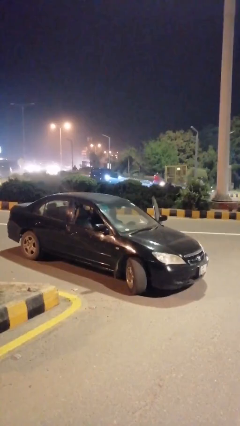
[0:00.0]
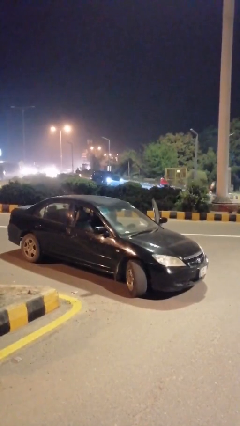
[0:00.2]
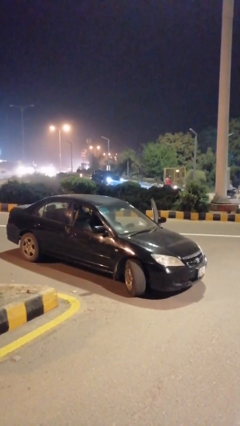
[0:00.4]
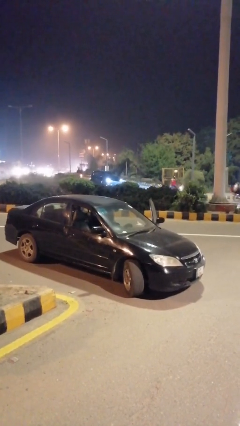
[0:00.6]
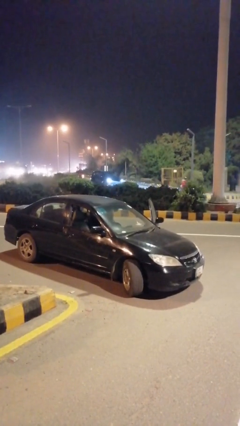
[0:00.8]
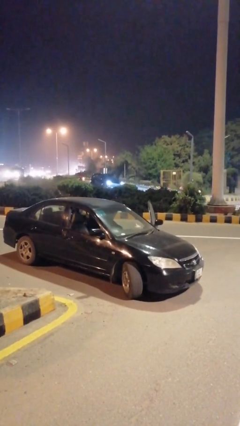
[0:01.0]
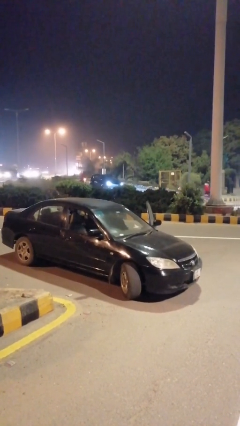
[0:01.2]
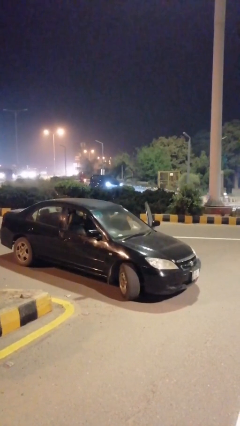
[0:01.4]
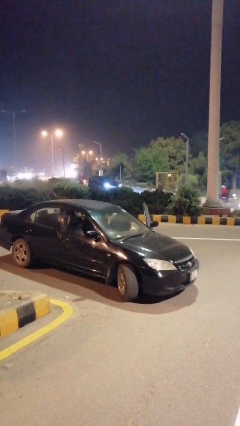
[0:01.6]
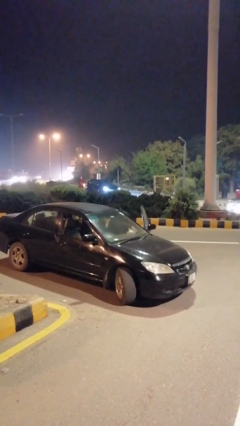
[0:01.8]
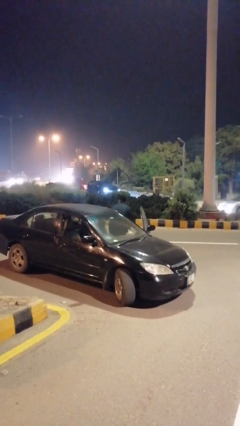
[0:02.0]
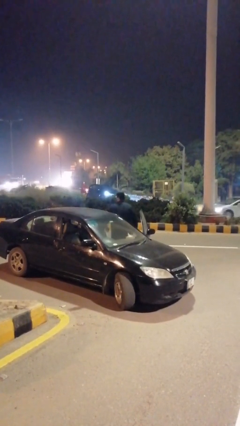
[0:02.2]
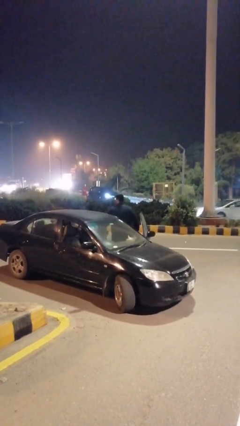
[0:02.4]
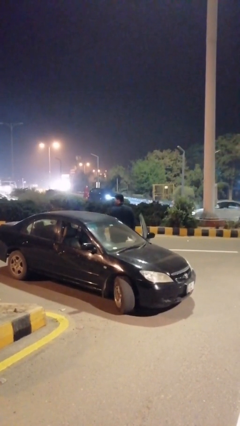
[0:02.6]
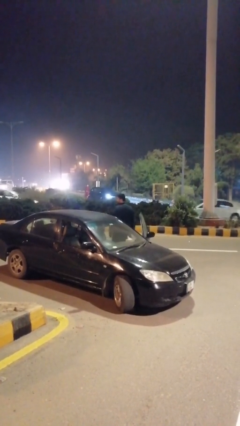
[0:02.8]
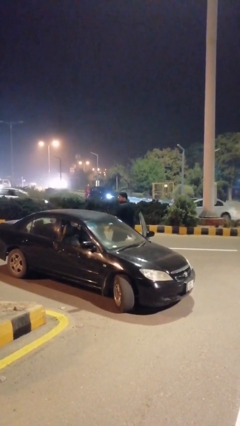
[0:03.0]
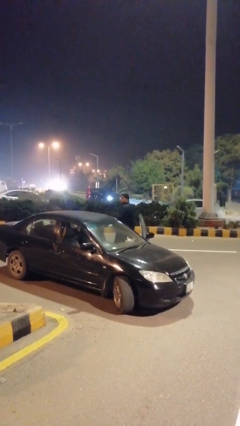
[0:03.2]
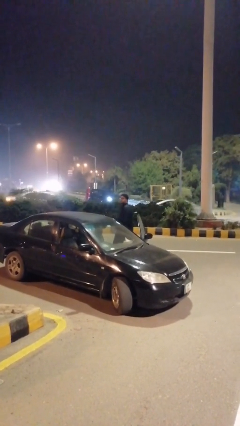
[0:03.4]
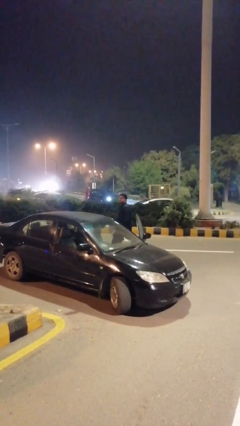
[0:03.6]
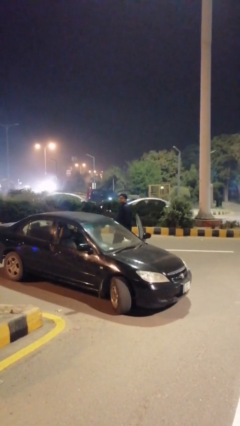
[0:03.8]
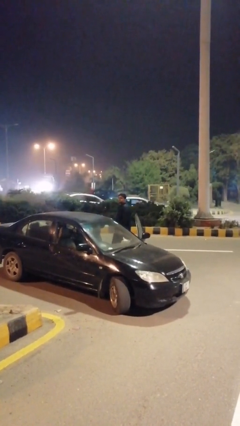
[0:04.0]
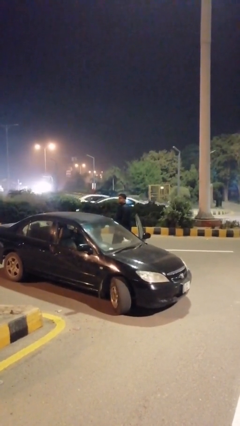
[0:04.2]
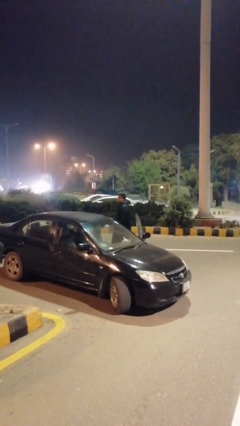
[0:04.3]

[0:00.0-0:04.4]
person exits car

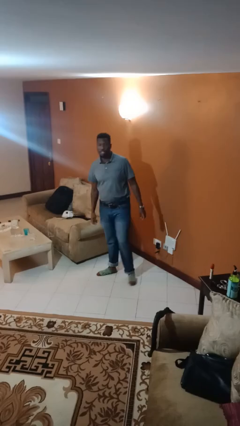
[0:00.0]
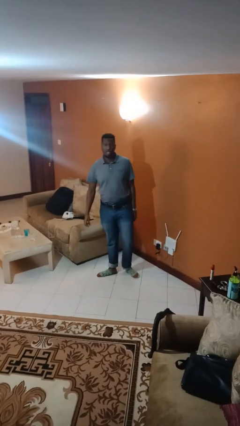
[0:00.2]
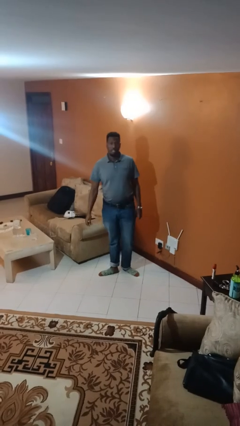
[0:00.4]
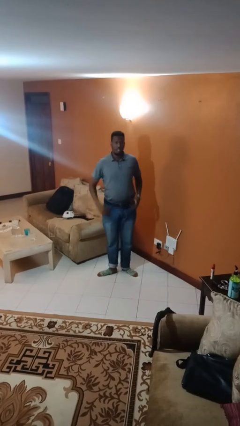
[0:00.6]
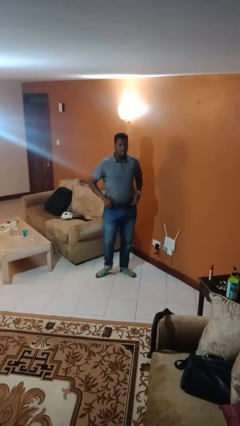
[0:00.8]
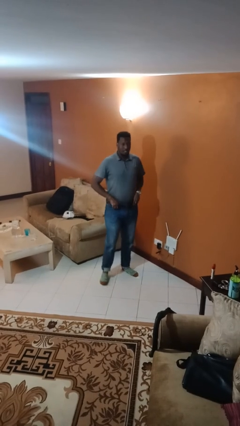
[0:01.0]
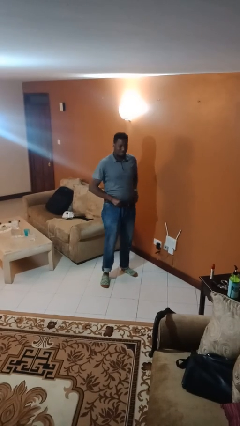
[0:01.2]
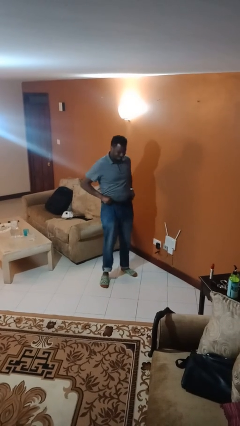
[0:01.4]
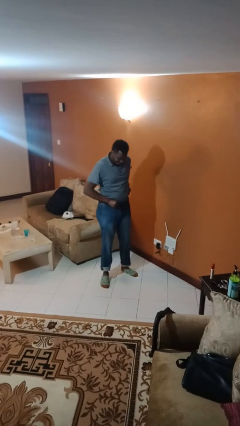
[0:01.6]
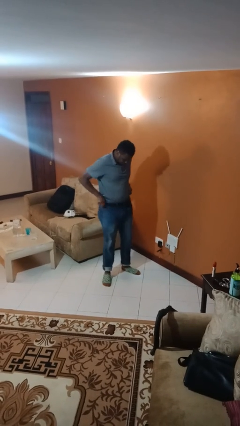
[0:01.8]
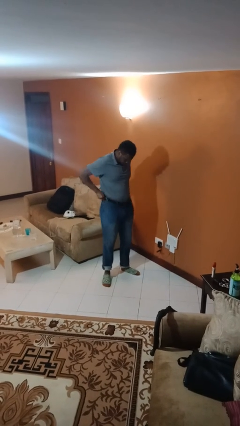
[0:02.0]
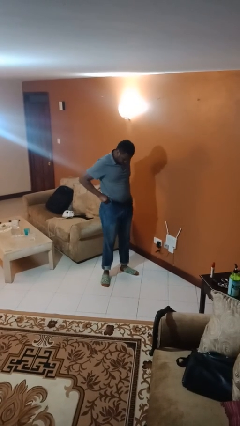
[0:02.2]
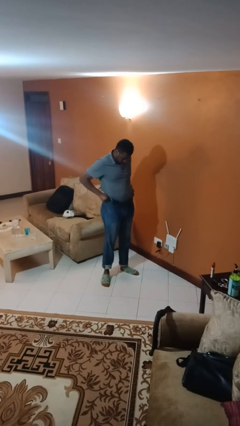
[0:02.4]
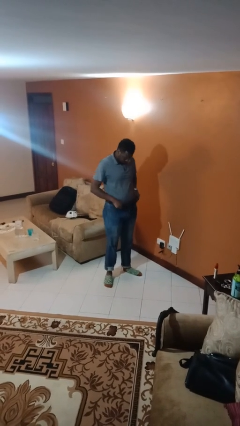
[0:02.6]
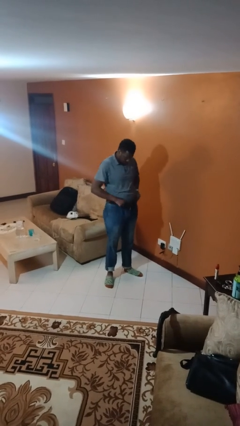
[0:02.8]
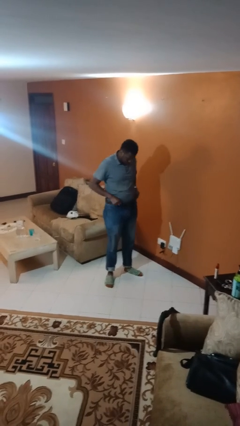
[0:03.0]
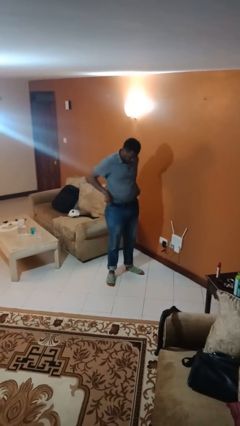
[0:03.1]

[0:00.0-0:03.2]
person hikes up pants

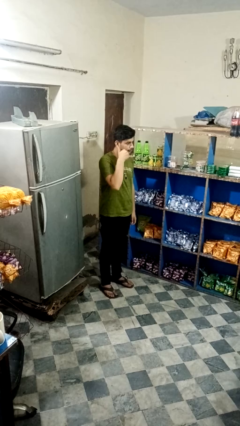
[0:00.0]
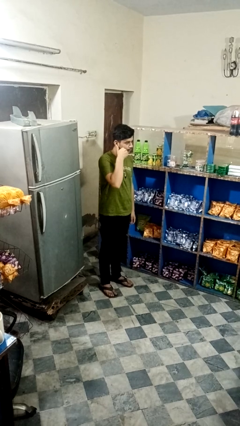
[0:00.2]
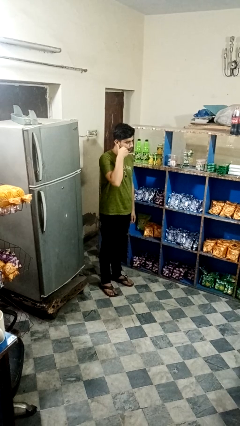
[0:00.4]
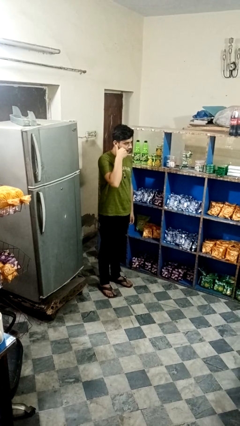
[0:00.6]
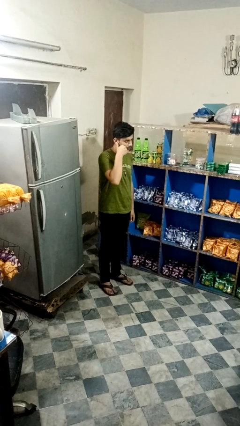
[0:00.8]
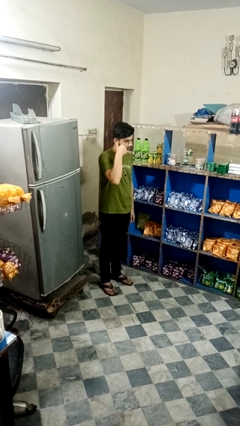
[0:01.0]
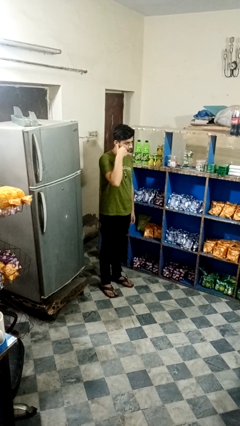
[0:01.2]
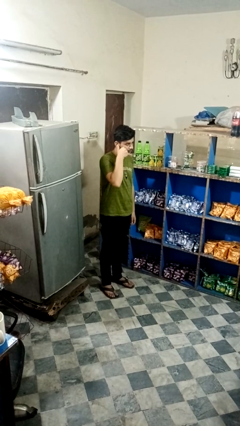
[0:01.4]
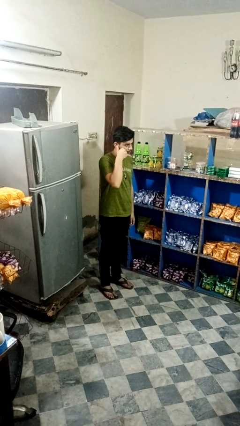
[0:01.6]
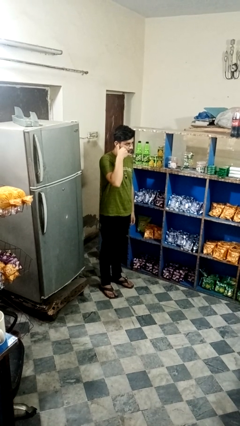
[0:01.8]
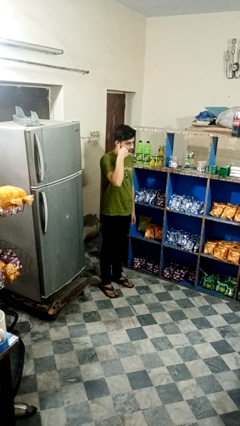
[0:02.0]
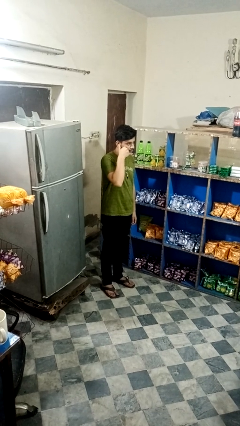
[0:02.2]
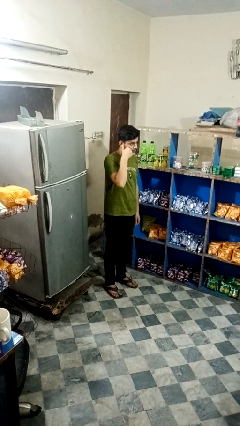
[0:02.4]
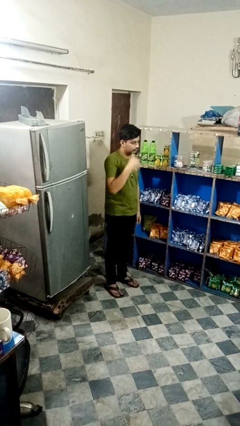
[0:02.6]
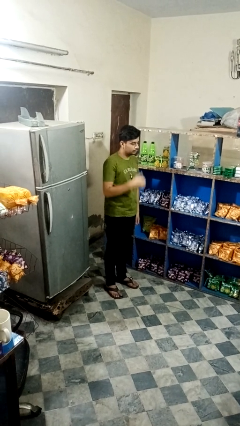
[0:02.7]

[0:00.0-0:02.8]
person gestures heart

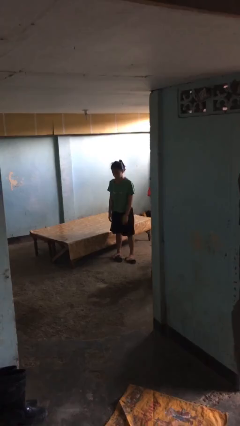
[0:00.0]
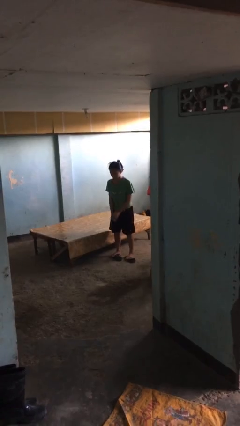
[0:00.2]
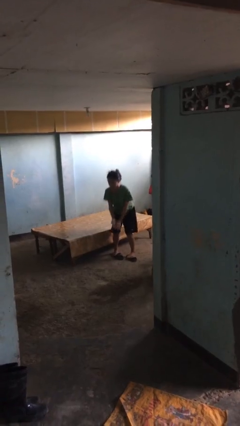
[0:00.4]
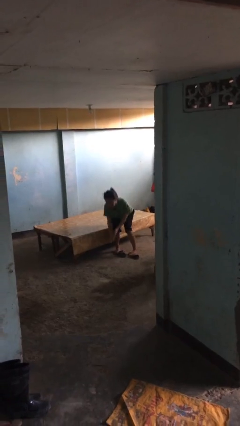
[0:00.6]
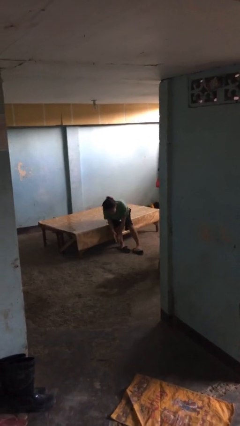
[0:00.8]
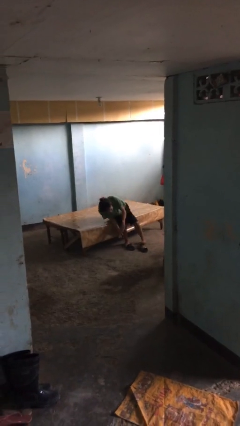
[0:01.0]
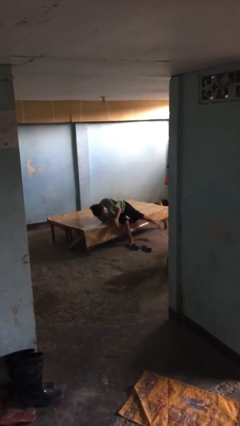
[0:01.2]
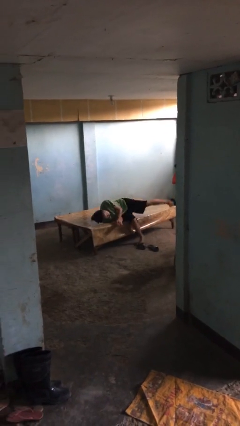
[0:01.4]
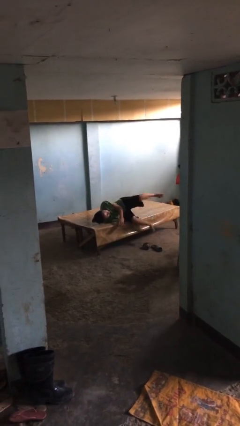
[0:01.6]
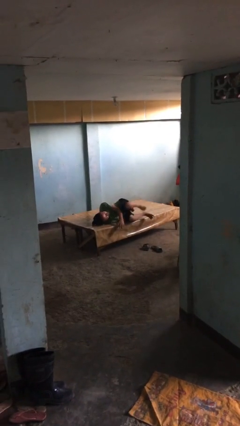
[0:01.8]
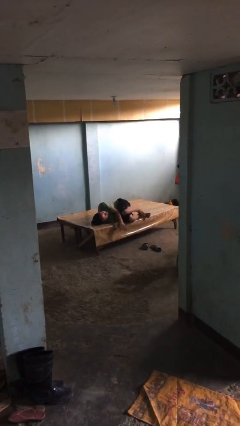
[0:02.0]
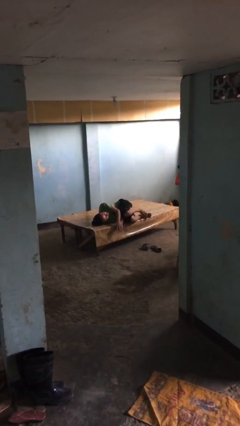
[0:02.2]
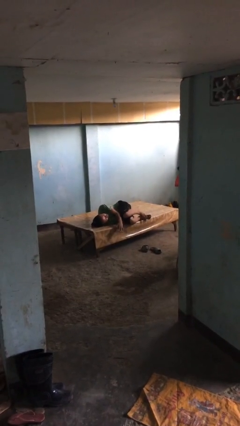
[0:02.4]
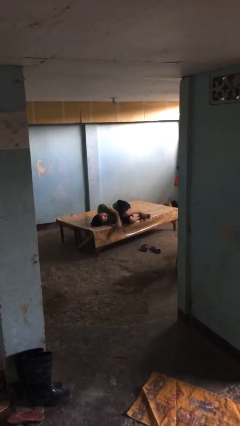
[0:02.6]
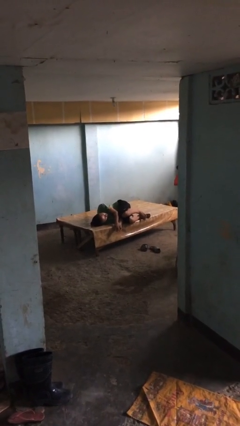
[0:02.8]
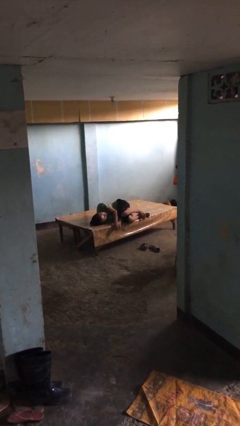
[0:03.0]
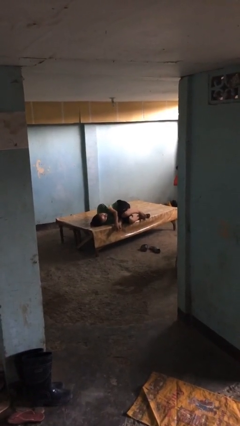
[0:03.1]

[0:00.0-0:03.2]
person lies down on bed

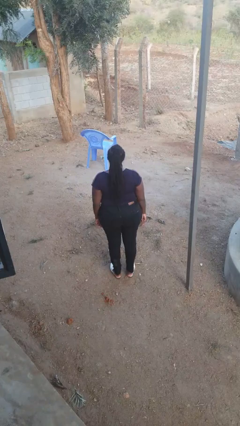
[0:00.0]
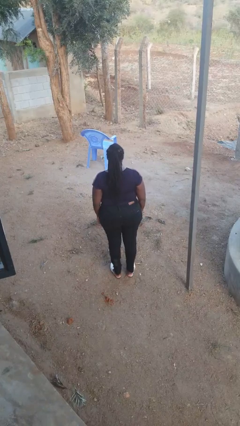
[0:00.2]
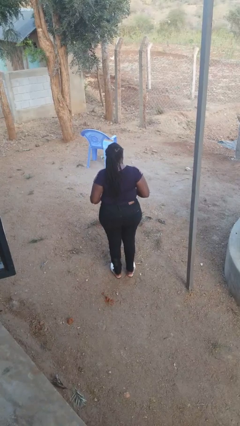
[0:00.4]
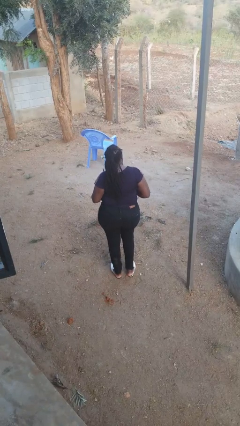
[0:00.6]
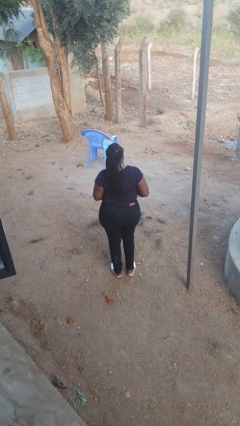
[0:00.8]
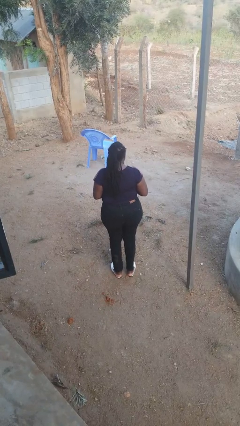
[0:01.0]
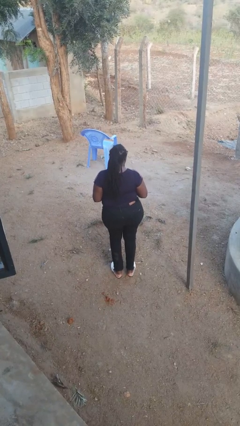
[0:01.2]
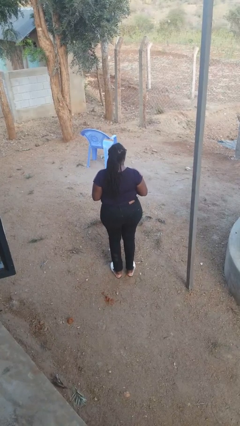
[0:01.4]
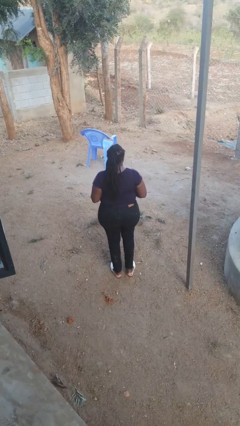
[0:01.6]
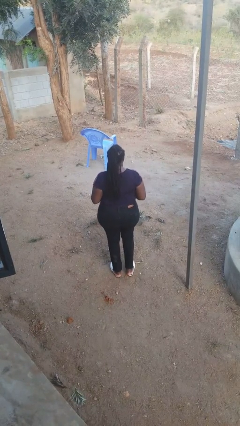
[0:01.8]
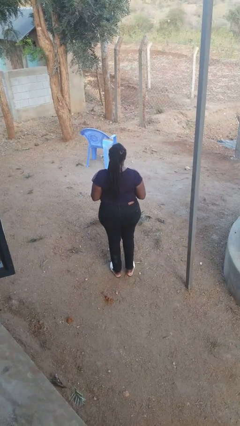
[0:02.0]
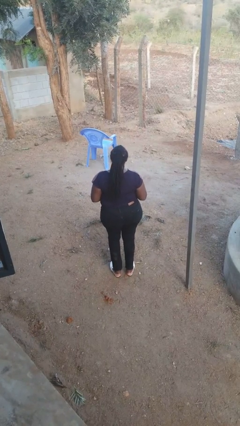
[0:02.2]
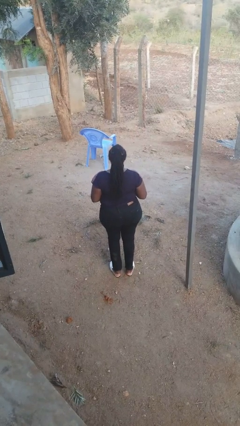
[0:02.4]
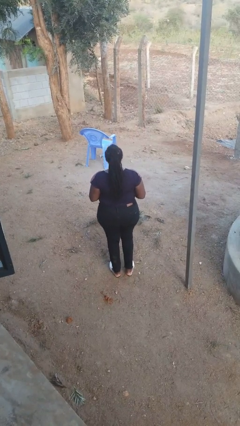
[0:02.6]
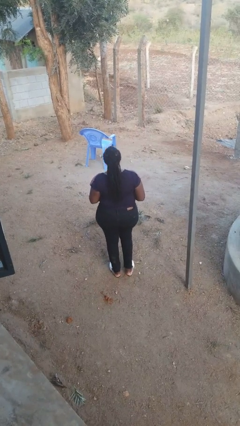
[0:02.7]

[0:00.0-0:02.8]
person wiggles hips

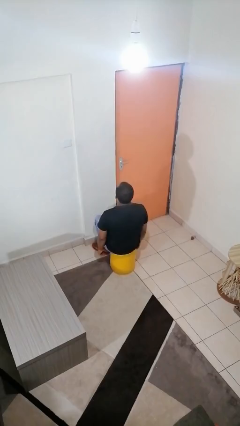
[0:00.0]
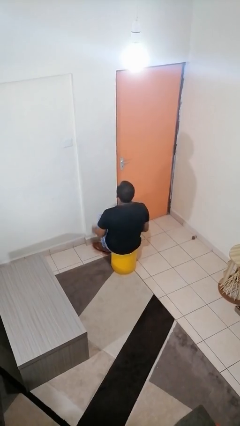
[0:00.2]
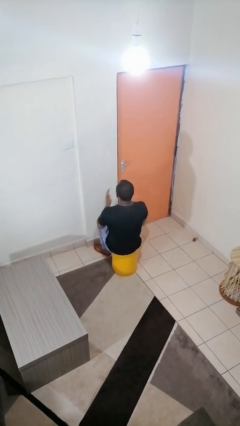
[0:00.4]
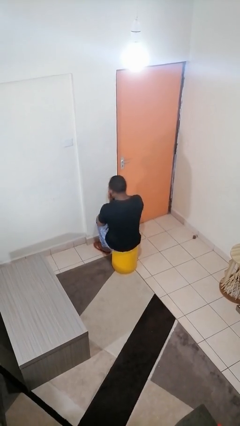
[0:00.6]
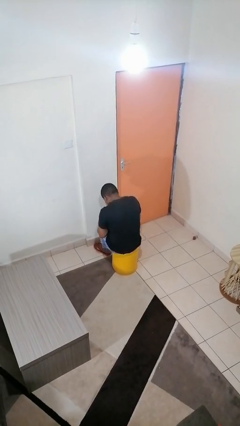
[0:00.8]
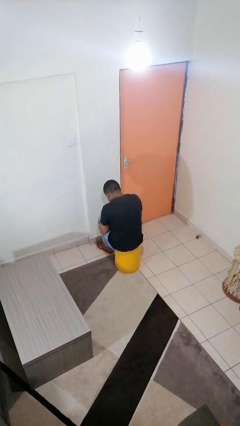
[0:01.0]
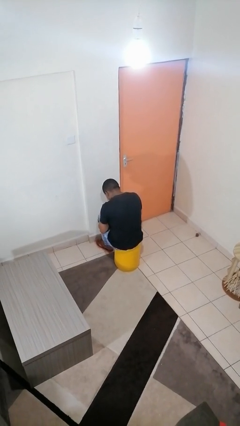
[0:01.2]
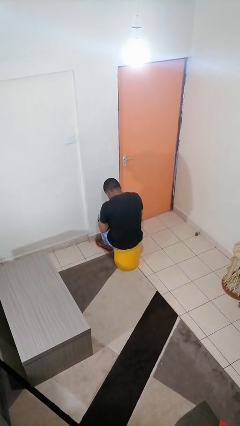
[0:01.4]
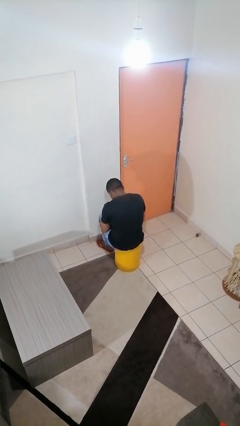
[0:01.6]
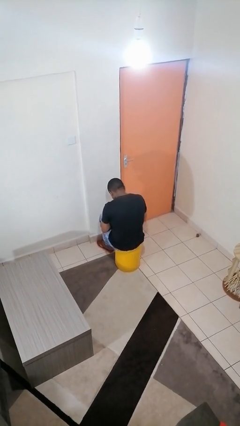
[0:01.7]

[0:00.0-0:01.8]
person sneezes into hand
